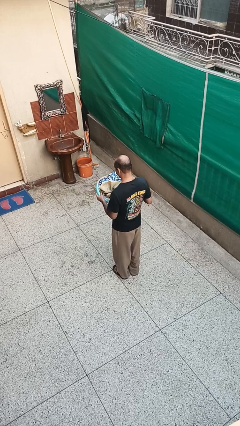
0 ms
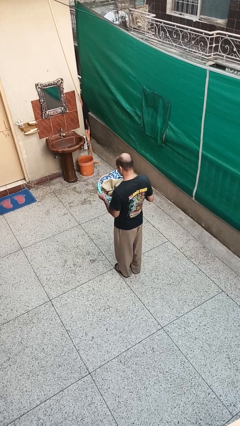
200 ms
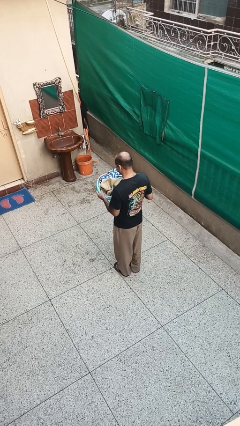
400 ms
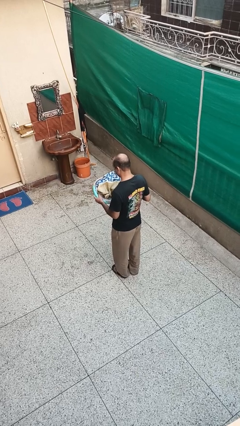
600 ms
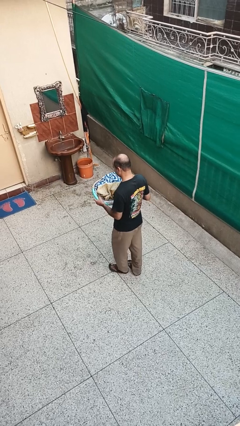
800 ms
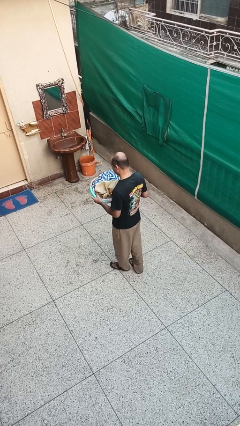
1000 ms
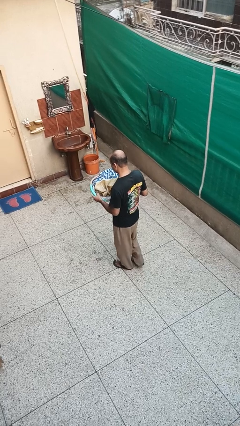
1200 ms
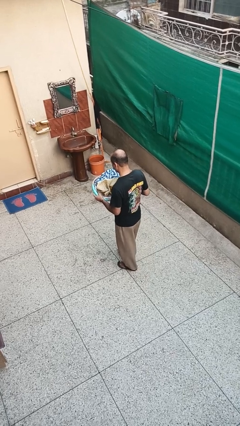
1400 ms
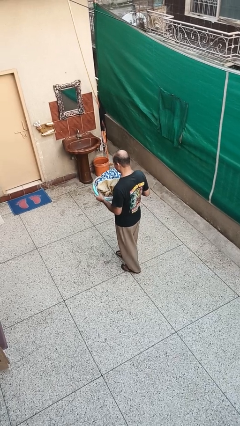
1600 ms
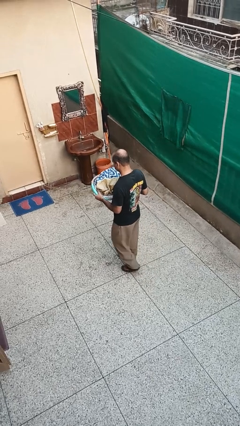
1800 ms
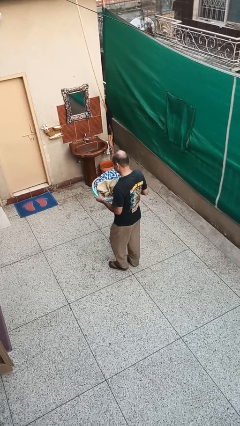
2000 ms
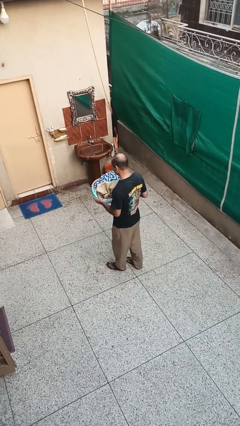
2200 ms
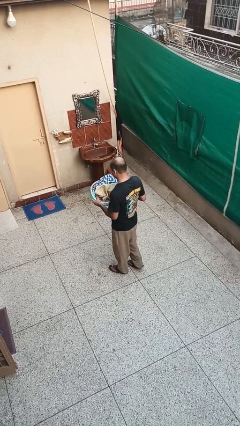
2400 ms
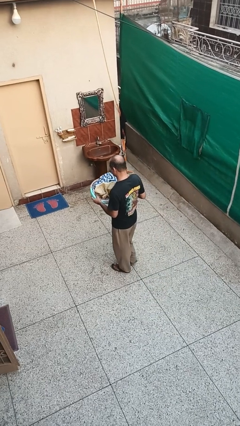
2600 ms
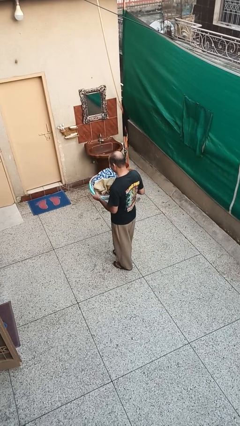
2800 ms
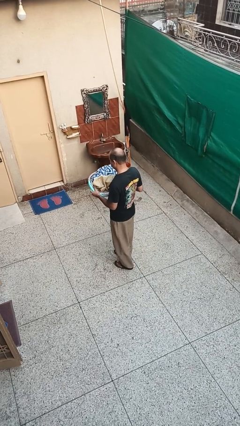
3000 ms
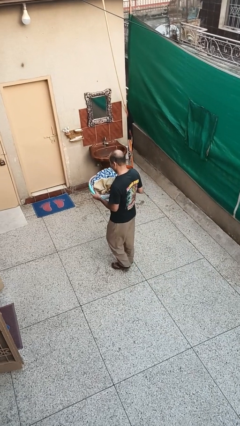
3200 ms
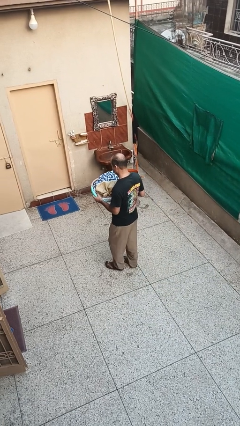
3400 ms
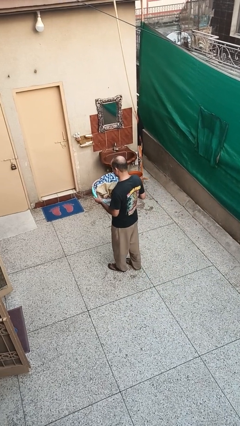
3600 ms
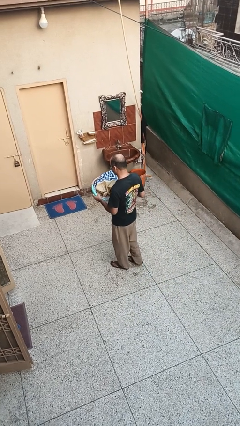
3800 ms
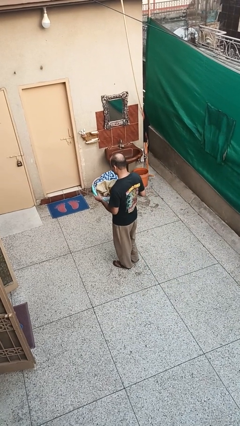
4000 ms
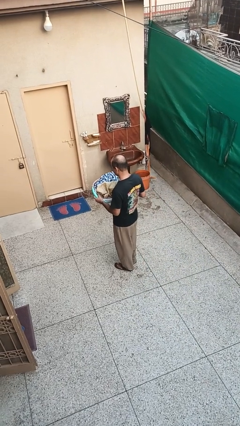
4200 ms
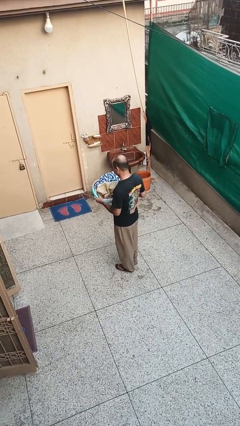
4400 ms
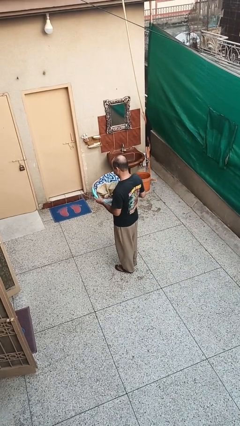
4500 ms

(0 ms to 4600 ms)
person carries laundry basket

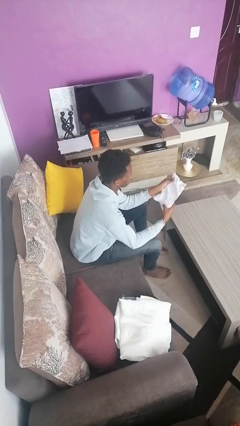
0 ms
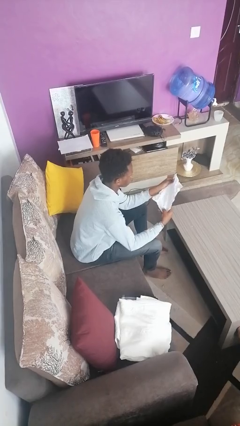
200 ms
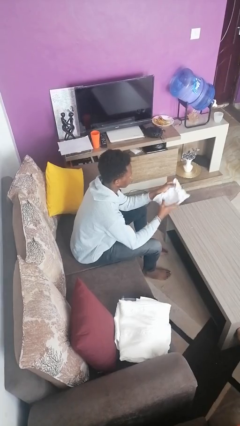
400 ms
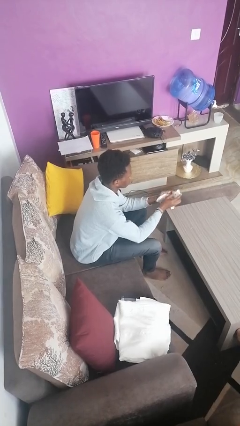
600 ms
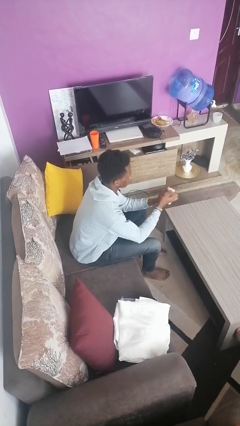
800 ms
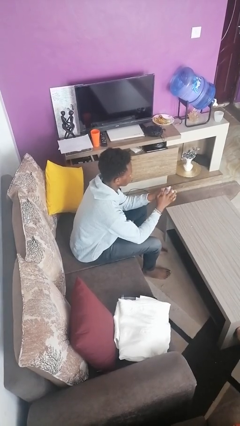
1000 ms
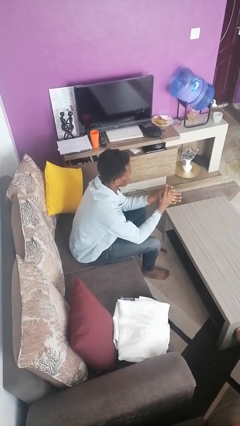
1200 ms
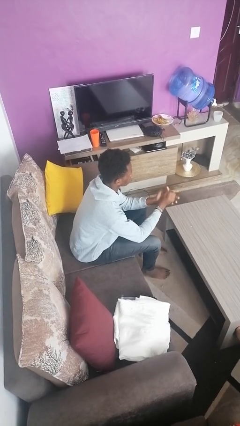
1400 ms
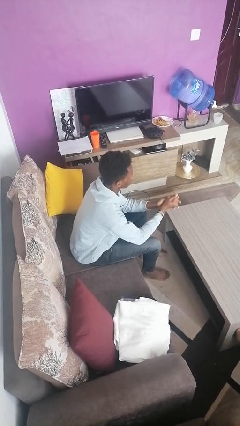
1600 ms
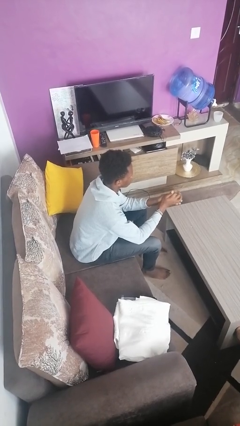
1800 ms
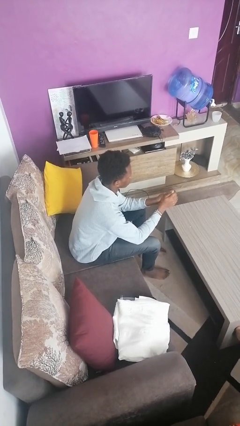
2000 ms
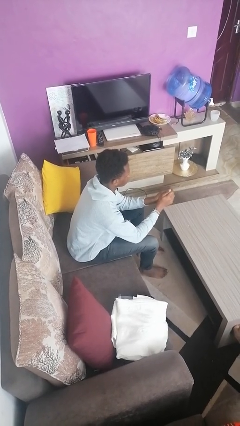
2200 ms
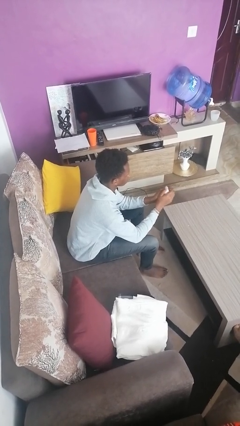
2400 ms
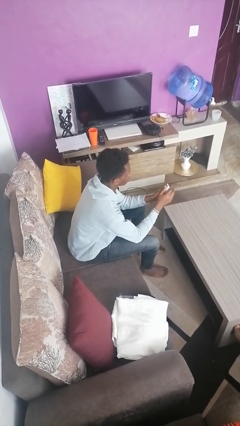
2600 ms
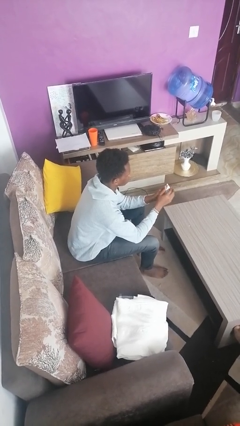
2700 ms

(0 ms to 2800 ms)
person crumples paper

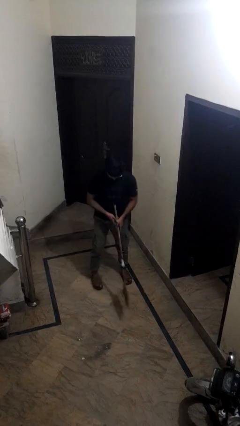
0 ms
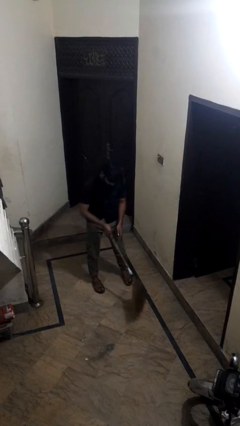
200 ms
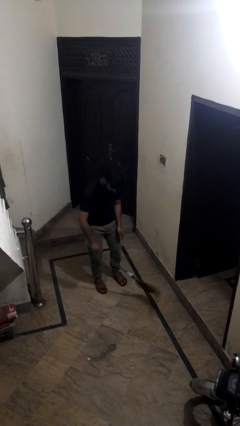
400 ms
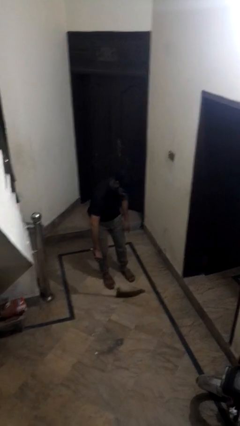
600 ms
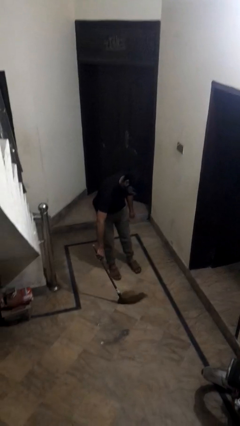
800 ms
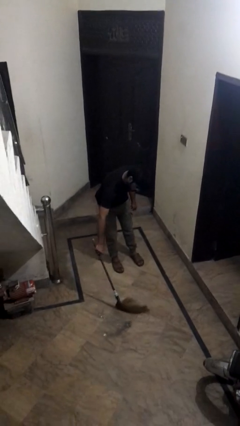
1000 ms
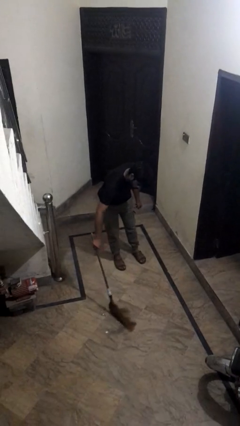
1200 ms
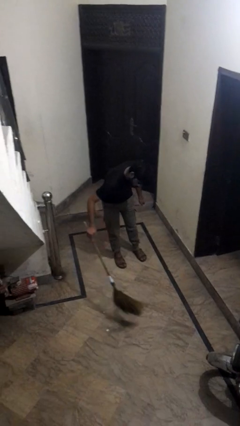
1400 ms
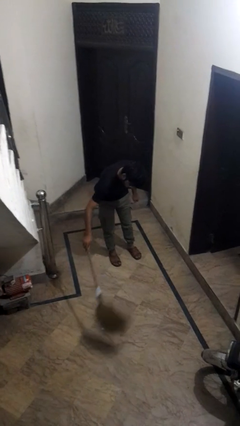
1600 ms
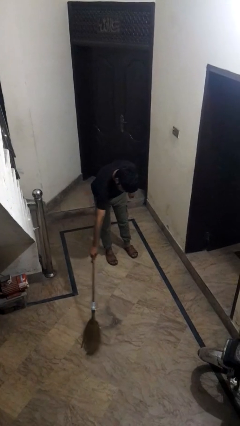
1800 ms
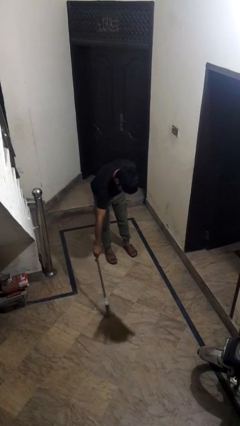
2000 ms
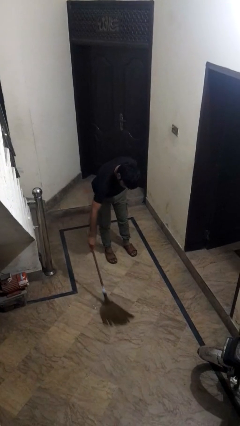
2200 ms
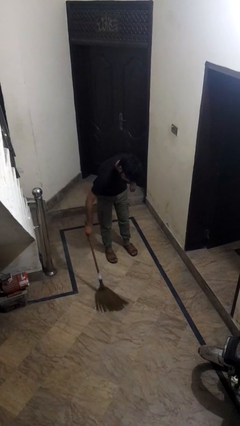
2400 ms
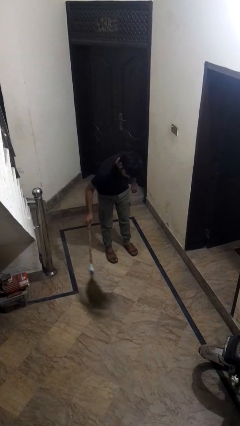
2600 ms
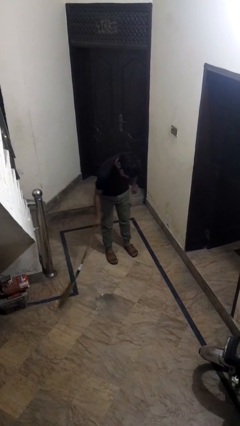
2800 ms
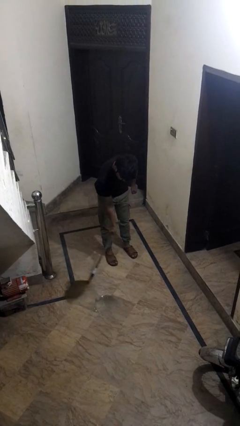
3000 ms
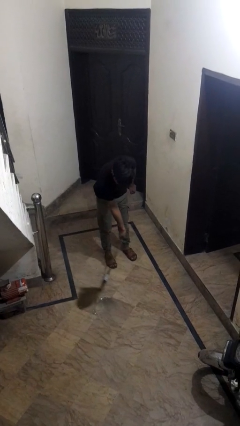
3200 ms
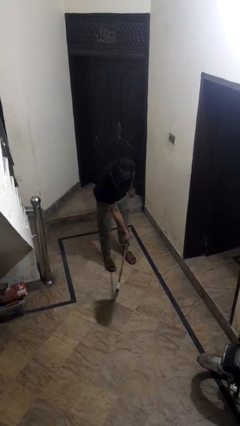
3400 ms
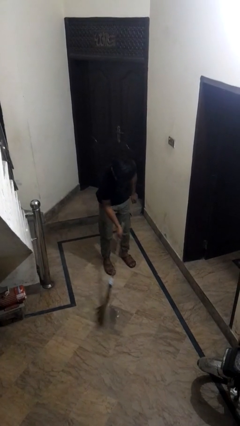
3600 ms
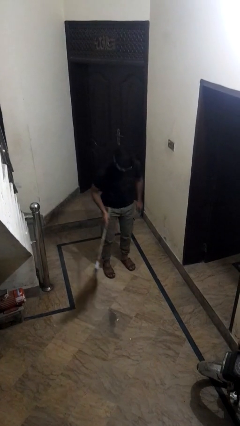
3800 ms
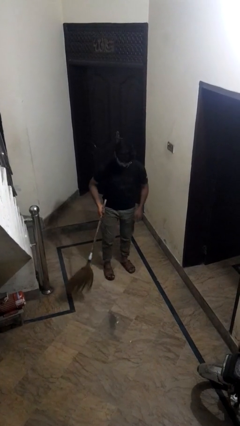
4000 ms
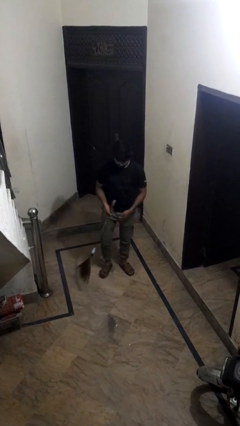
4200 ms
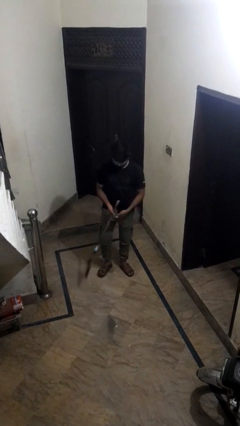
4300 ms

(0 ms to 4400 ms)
person sweeps floor

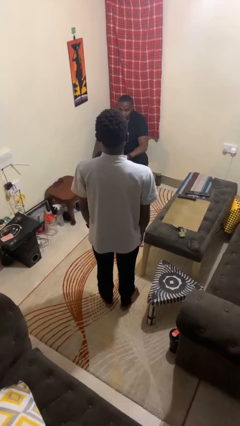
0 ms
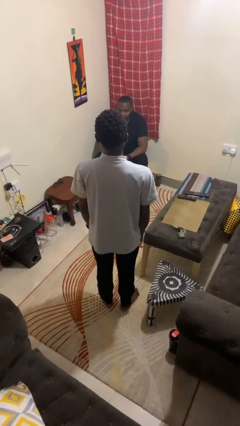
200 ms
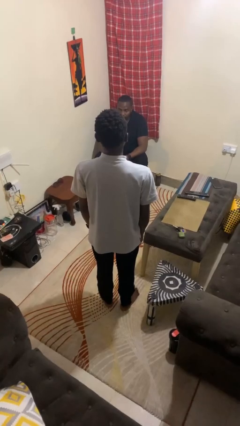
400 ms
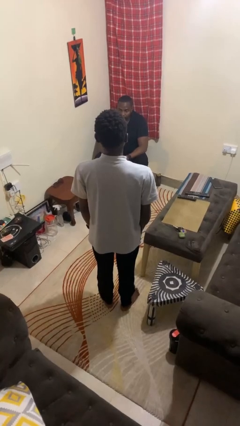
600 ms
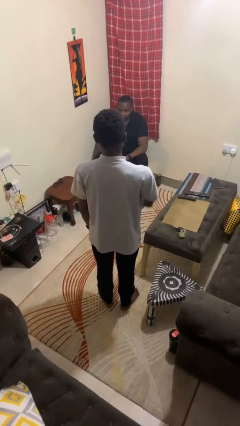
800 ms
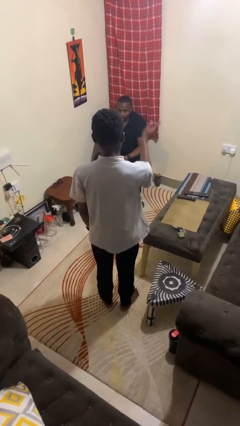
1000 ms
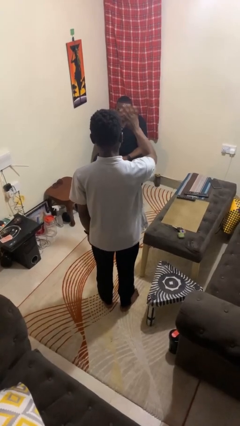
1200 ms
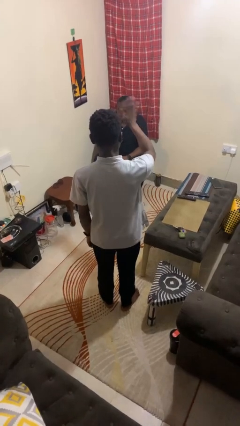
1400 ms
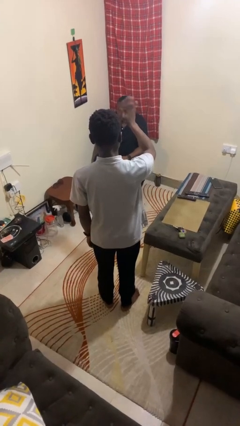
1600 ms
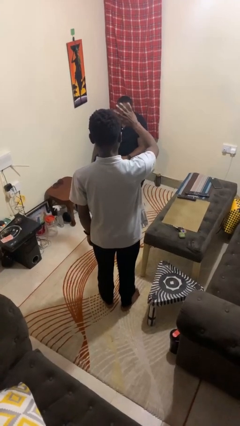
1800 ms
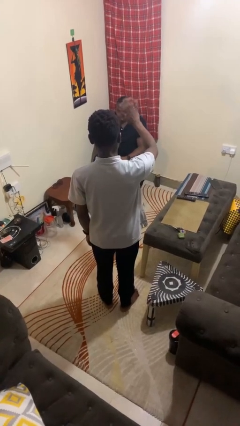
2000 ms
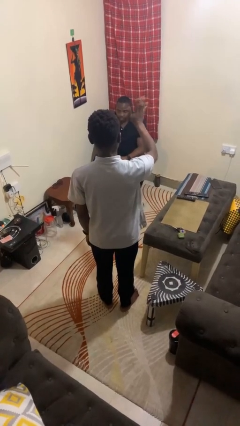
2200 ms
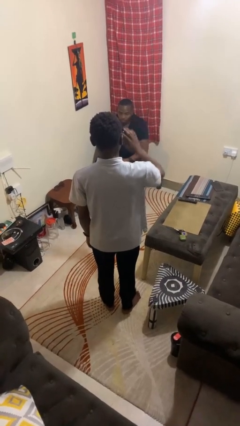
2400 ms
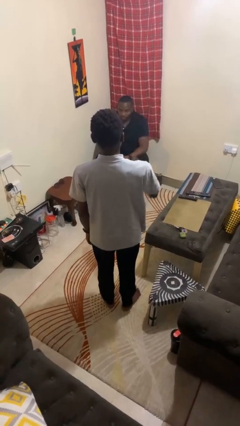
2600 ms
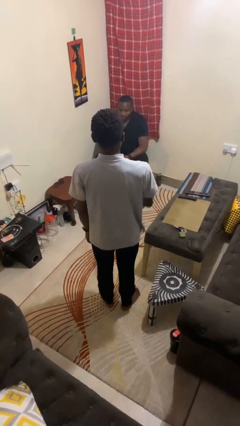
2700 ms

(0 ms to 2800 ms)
person waves at person

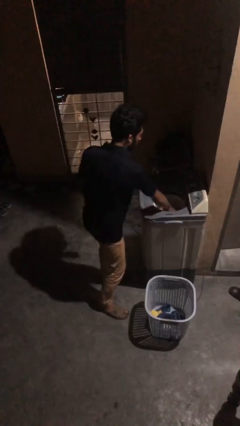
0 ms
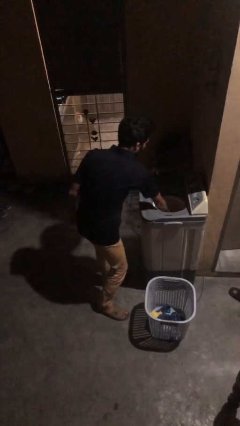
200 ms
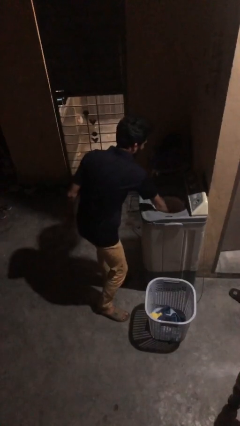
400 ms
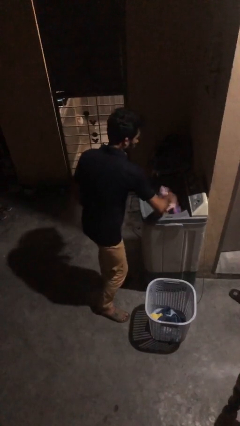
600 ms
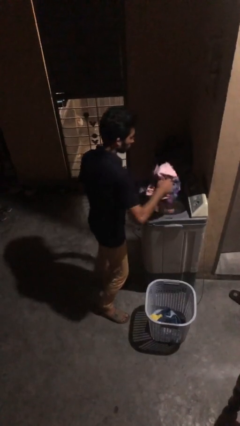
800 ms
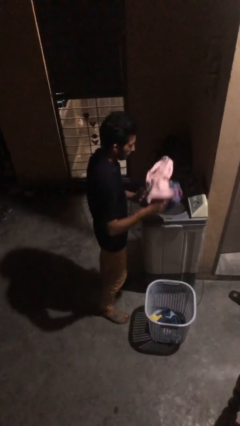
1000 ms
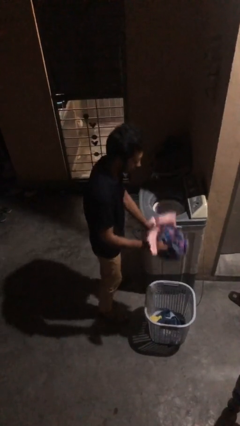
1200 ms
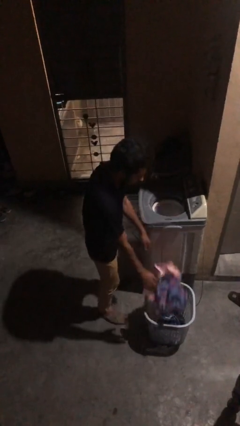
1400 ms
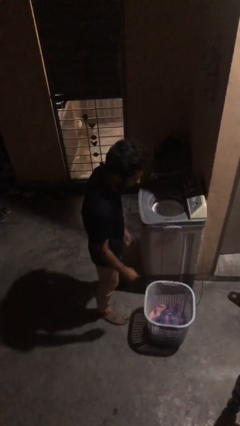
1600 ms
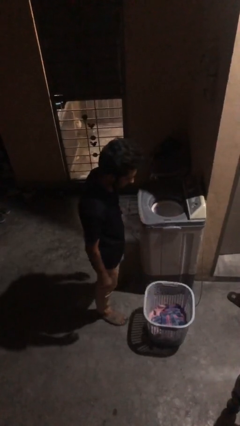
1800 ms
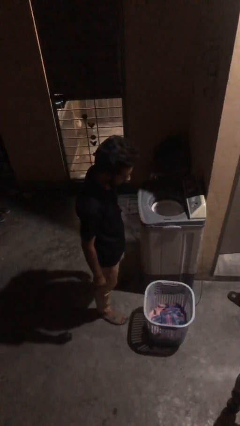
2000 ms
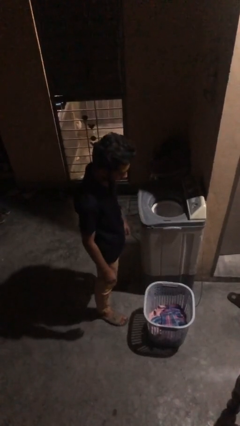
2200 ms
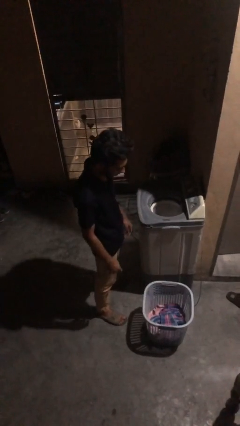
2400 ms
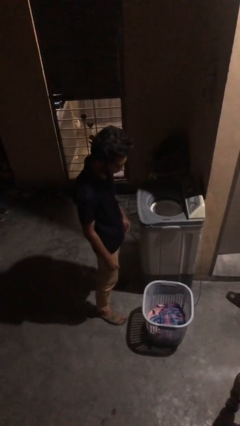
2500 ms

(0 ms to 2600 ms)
person unloads dryer

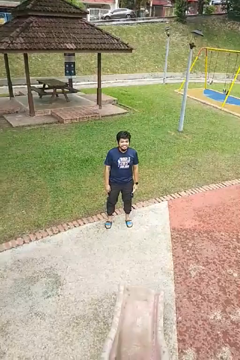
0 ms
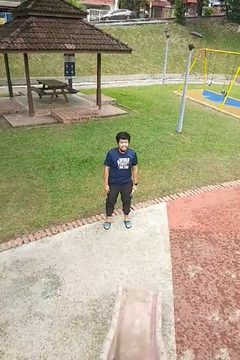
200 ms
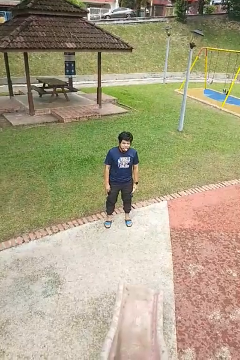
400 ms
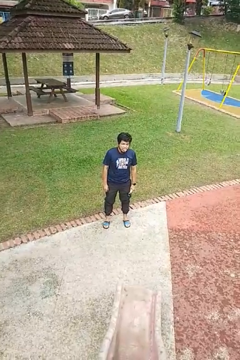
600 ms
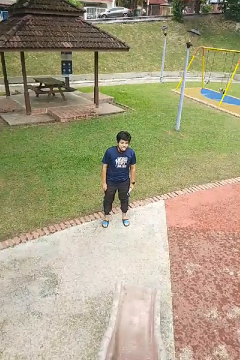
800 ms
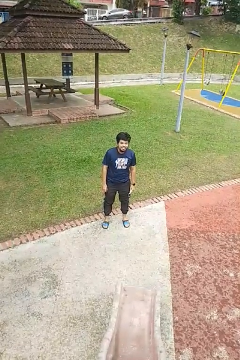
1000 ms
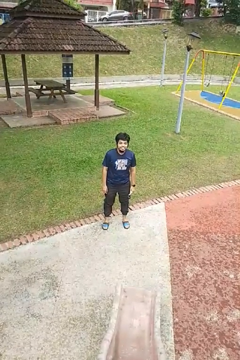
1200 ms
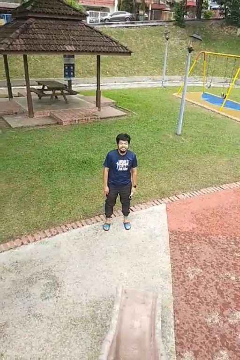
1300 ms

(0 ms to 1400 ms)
person sticks out tongue
